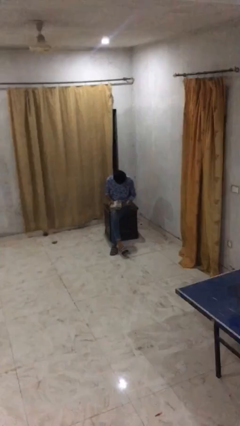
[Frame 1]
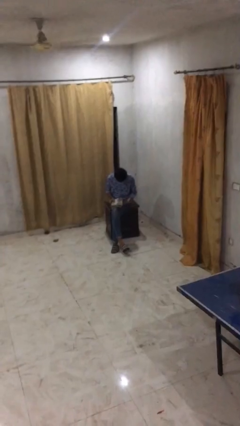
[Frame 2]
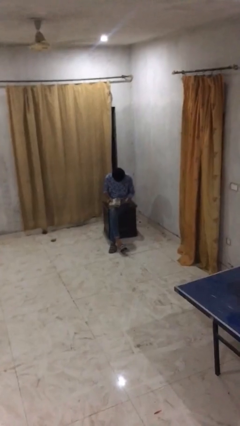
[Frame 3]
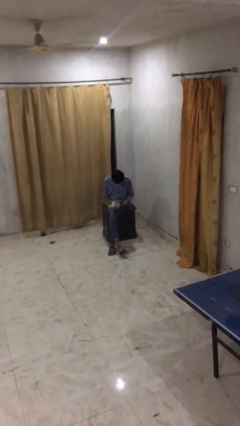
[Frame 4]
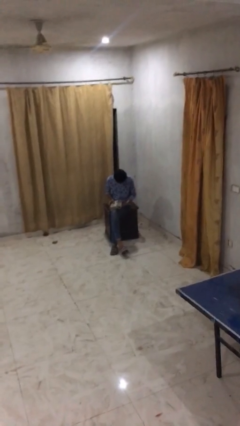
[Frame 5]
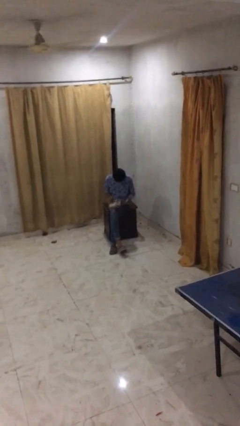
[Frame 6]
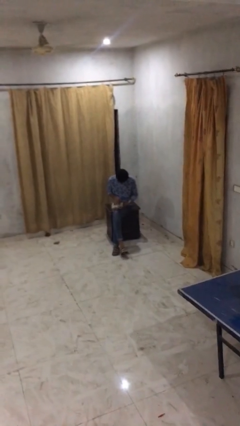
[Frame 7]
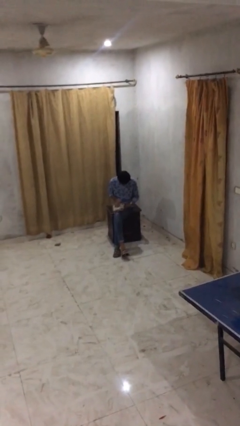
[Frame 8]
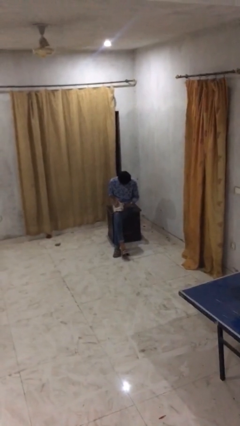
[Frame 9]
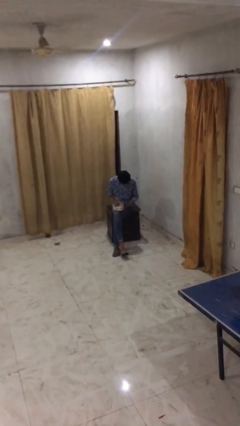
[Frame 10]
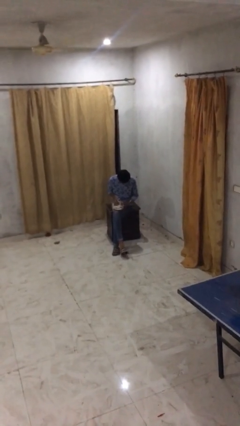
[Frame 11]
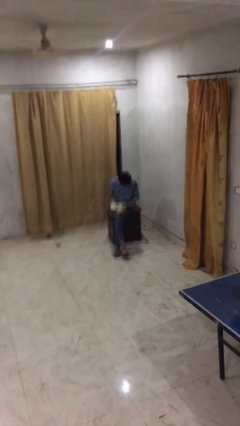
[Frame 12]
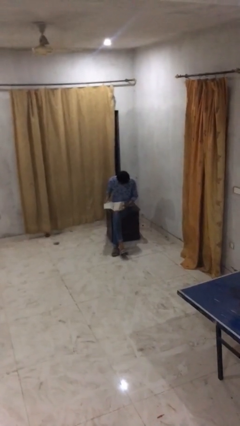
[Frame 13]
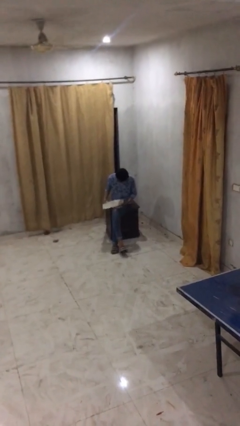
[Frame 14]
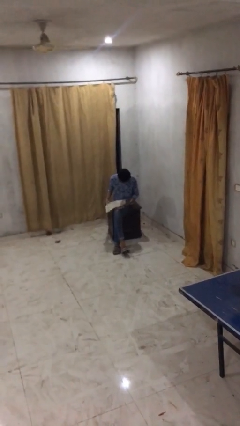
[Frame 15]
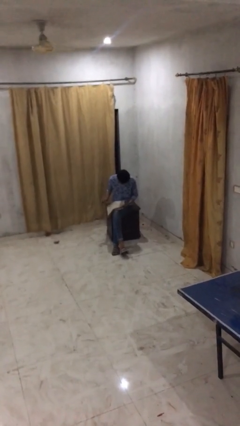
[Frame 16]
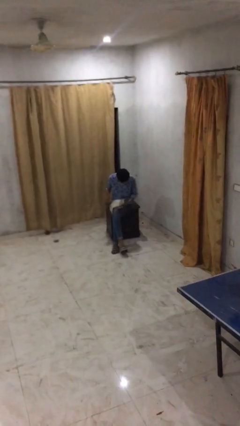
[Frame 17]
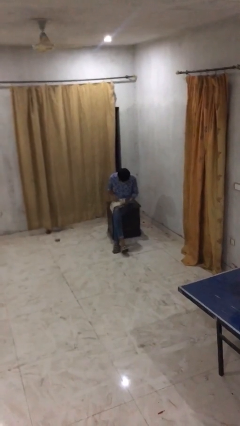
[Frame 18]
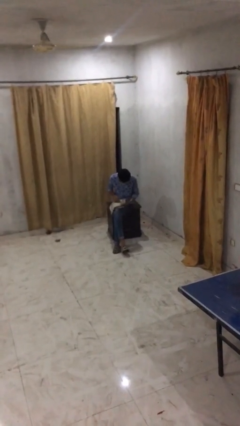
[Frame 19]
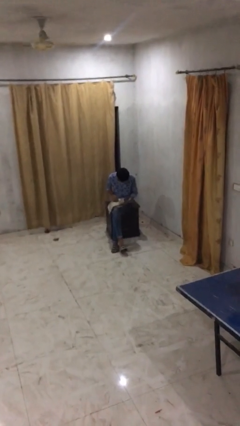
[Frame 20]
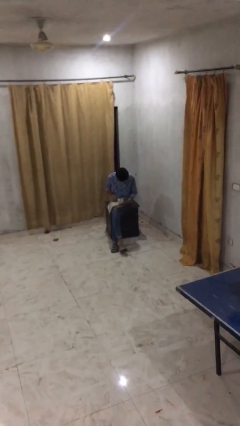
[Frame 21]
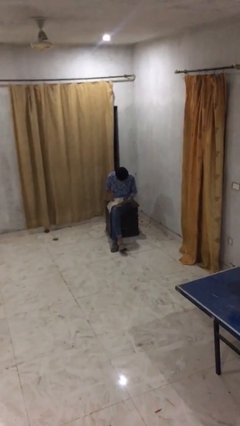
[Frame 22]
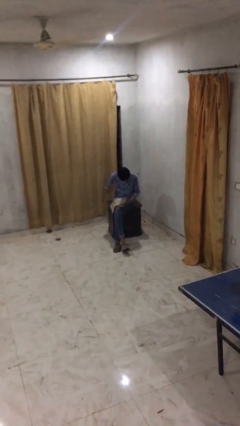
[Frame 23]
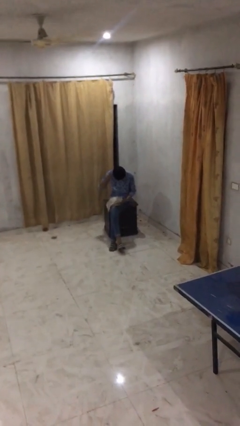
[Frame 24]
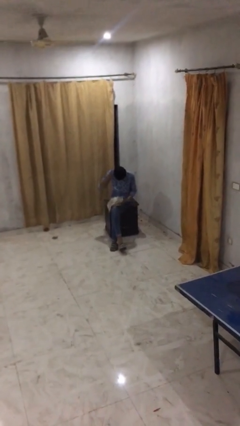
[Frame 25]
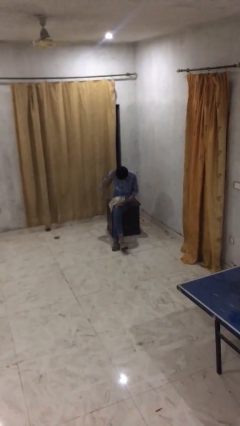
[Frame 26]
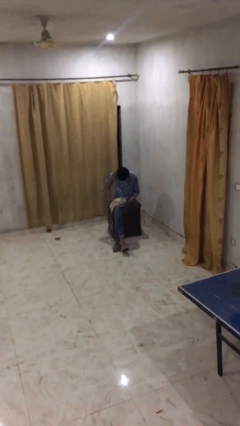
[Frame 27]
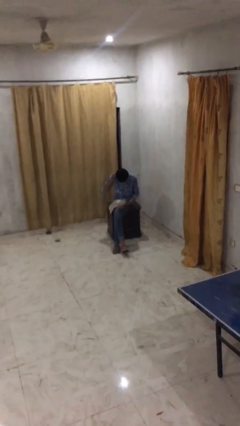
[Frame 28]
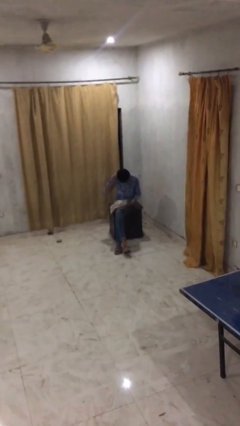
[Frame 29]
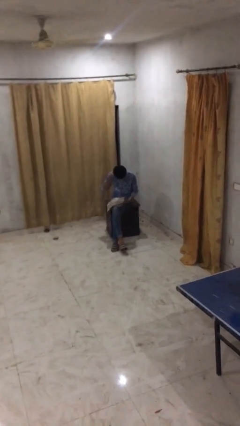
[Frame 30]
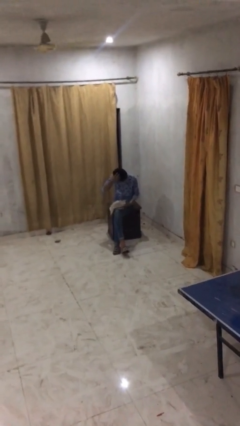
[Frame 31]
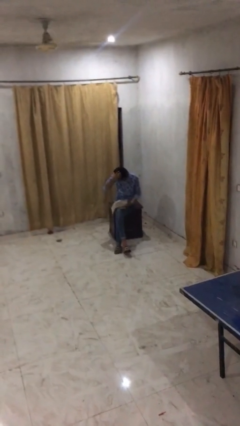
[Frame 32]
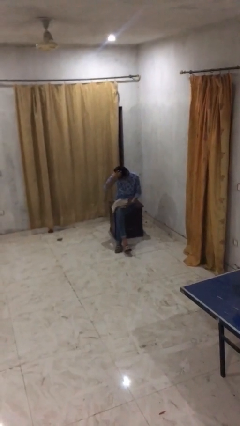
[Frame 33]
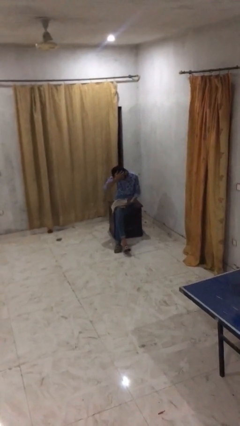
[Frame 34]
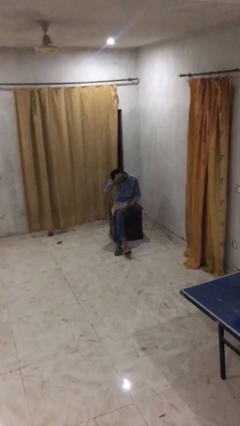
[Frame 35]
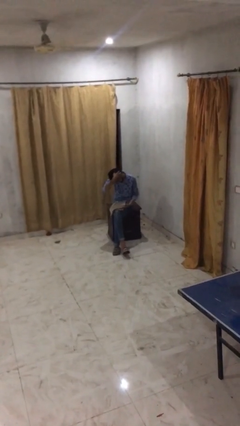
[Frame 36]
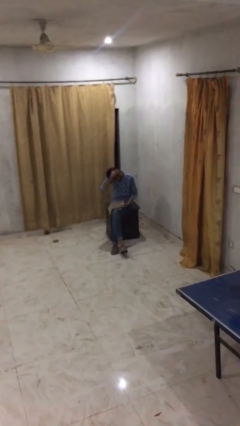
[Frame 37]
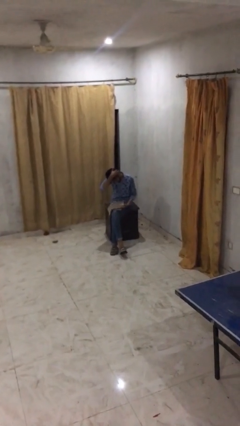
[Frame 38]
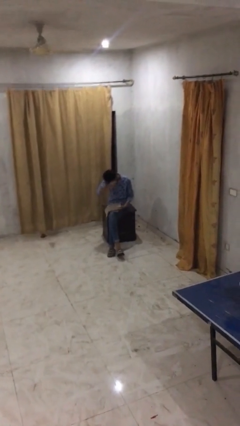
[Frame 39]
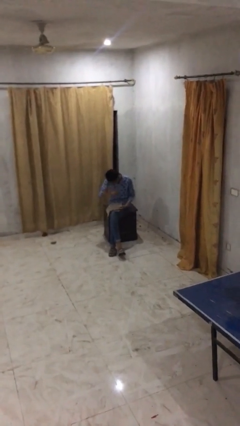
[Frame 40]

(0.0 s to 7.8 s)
person reads document

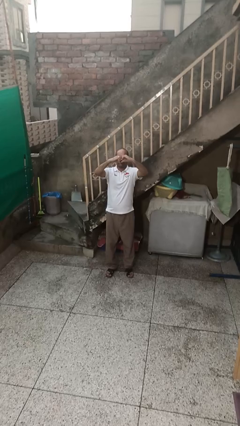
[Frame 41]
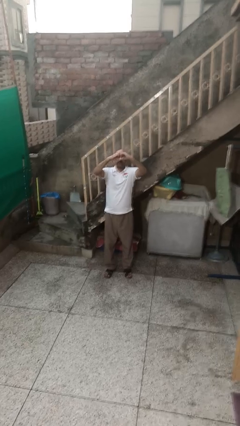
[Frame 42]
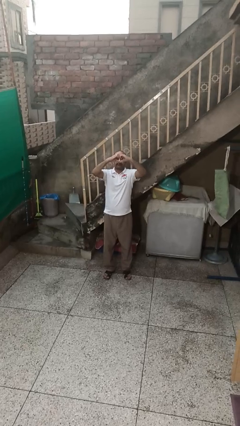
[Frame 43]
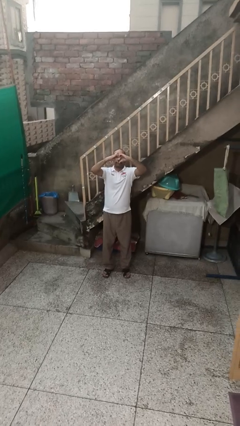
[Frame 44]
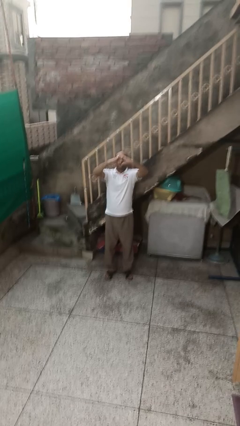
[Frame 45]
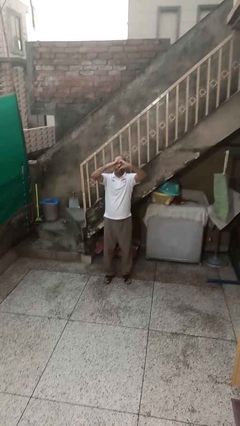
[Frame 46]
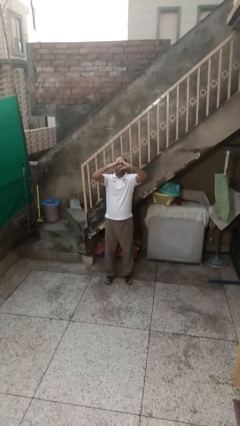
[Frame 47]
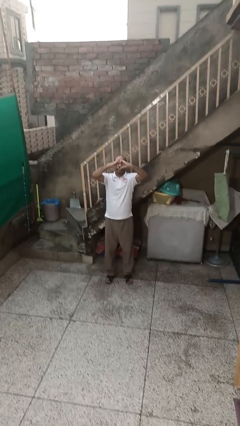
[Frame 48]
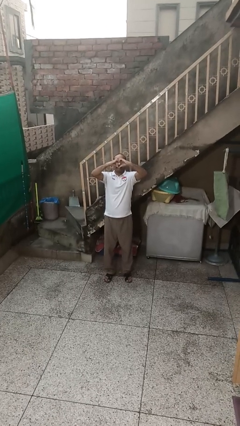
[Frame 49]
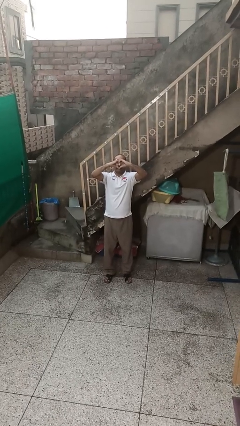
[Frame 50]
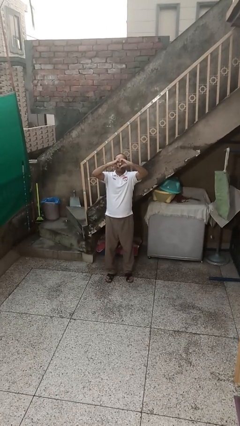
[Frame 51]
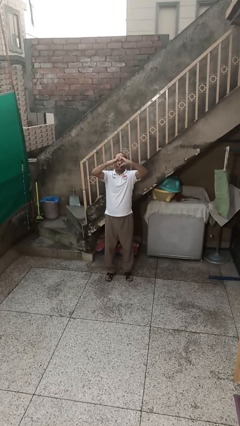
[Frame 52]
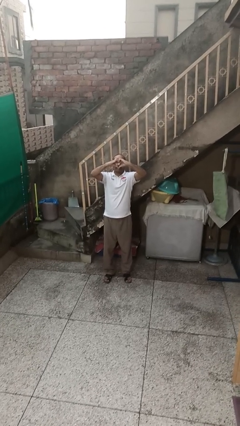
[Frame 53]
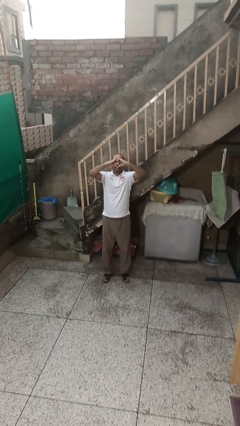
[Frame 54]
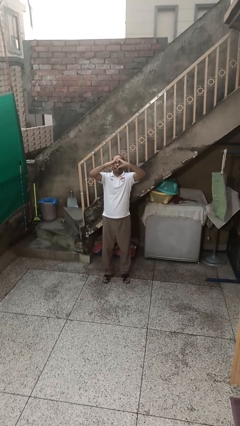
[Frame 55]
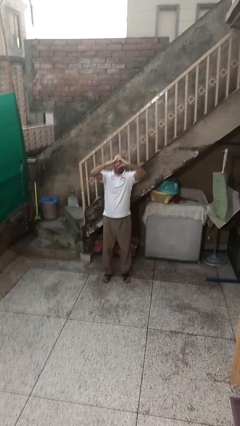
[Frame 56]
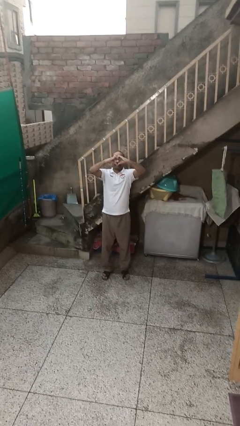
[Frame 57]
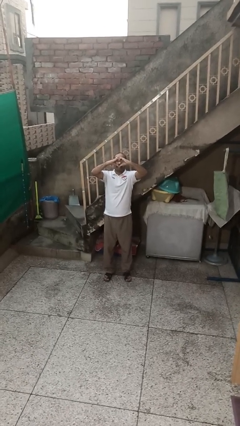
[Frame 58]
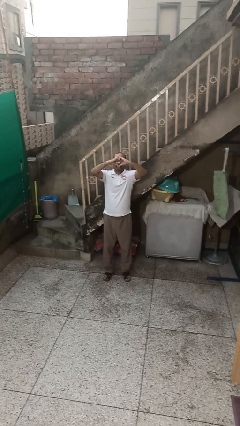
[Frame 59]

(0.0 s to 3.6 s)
person gestures heart

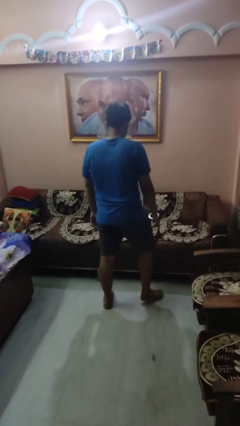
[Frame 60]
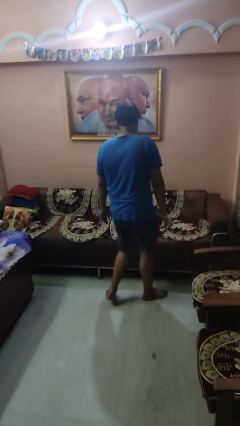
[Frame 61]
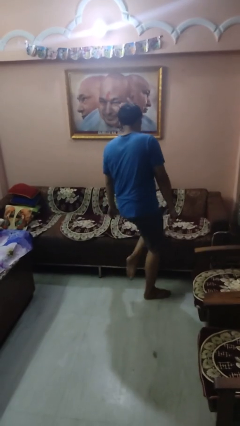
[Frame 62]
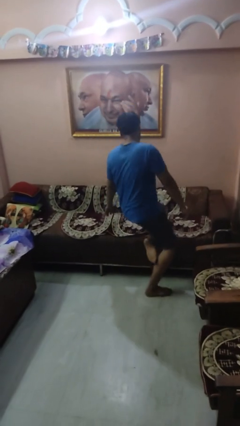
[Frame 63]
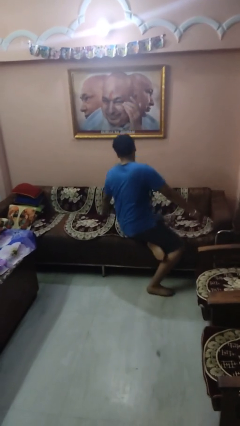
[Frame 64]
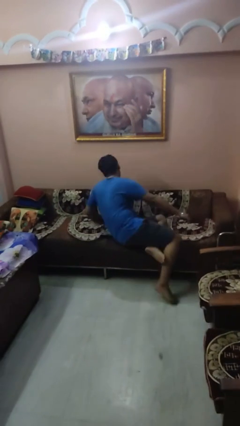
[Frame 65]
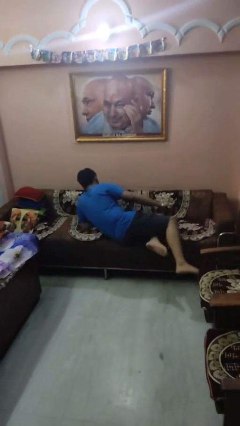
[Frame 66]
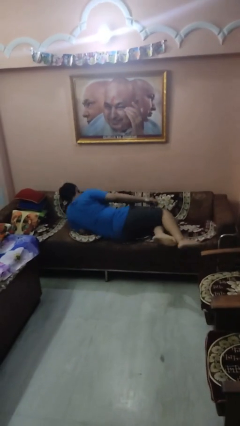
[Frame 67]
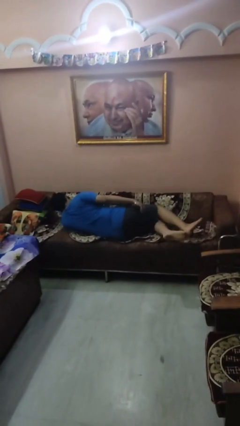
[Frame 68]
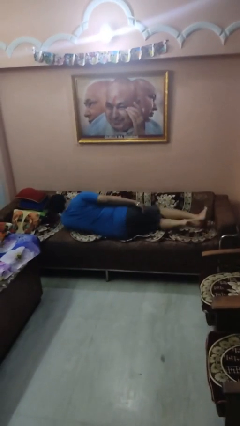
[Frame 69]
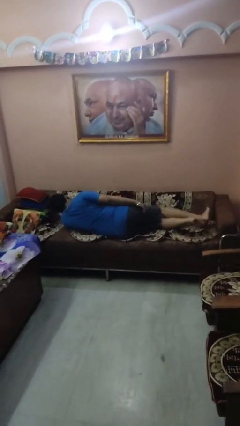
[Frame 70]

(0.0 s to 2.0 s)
person lies down on couch

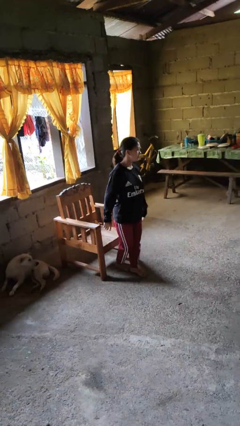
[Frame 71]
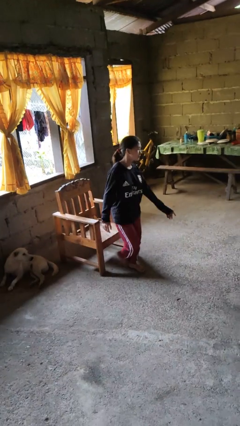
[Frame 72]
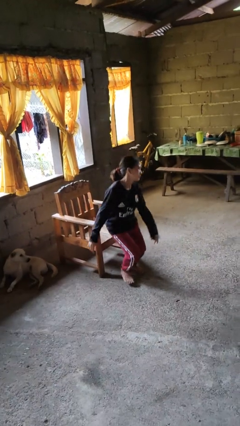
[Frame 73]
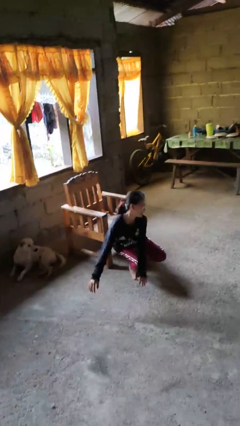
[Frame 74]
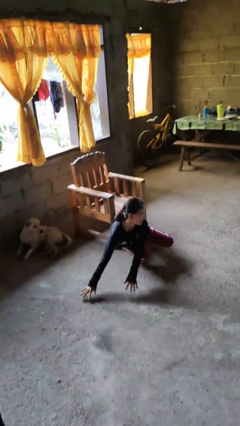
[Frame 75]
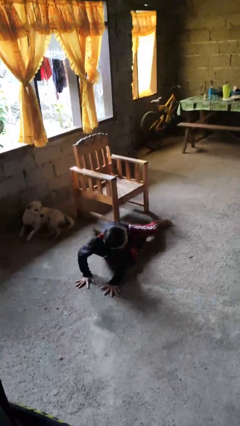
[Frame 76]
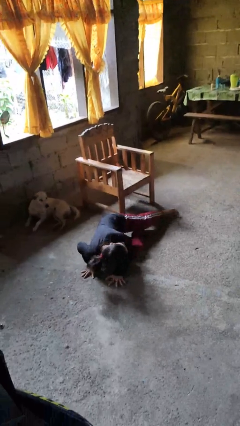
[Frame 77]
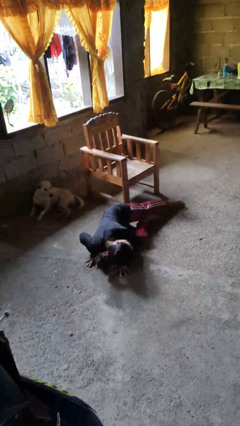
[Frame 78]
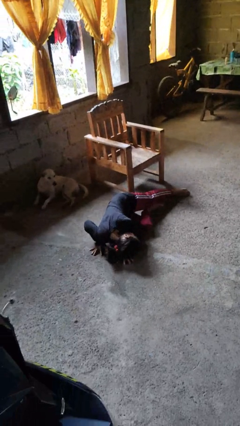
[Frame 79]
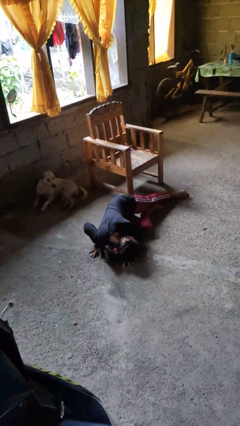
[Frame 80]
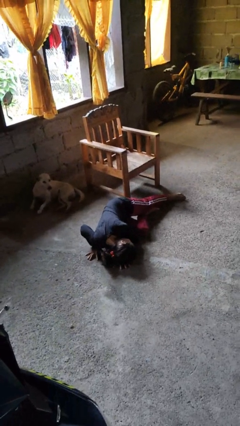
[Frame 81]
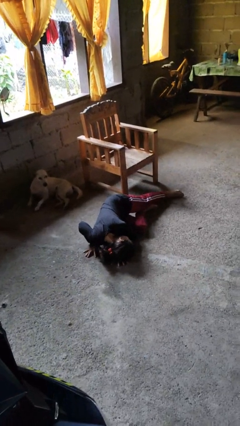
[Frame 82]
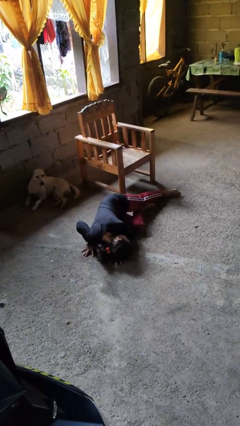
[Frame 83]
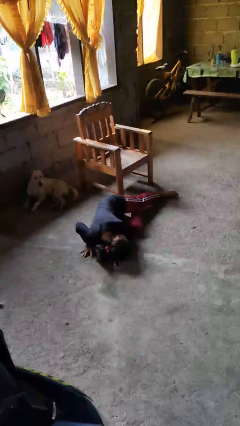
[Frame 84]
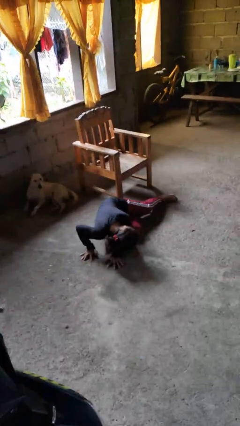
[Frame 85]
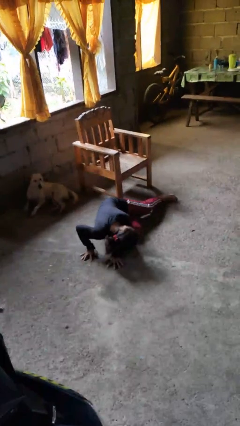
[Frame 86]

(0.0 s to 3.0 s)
person falls from chair

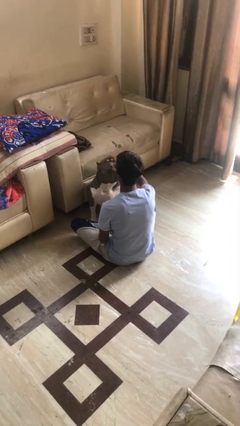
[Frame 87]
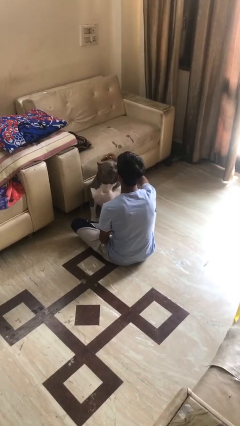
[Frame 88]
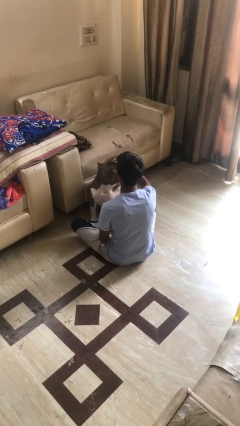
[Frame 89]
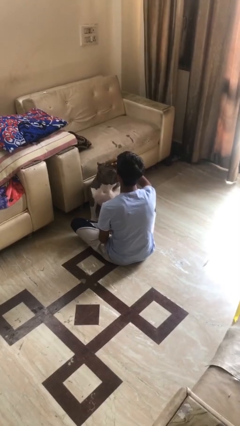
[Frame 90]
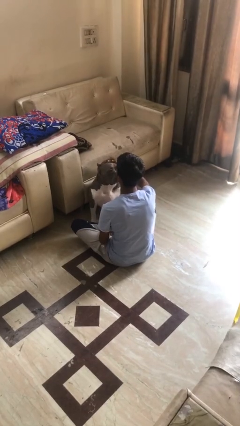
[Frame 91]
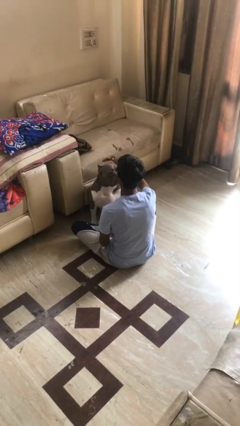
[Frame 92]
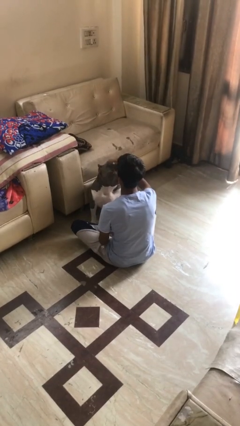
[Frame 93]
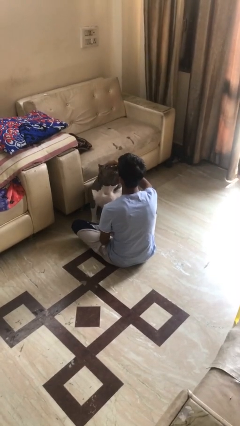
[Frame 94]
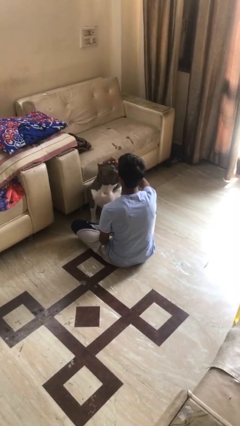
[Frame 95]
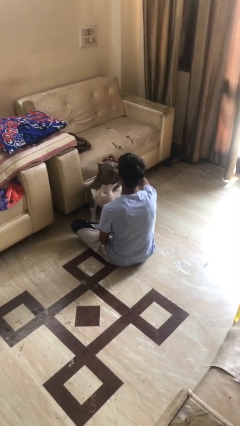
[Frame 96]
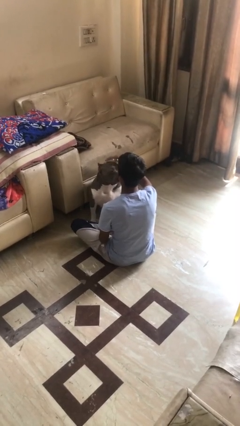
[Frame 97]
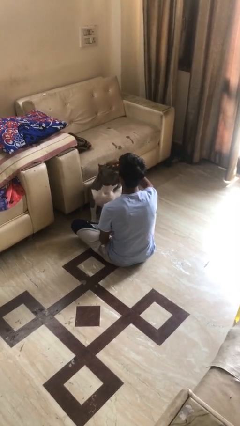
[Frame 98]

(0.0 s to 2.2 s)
person pets dog
